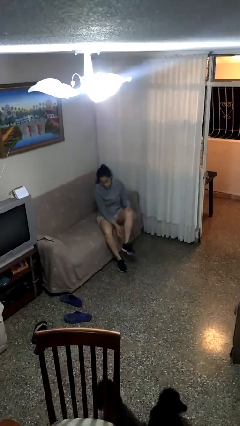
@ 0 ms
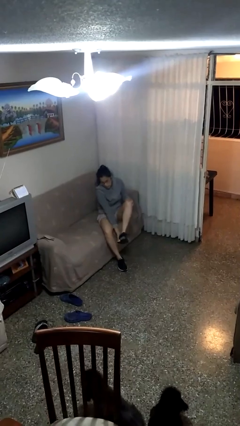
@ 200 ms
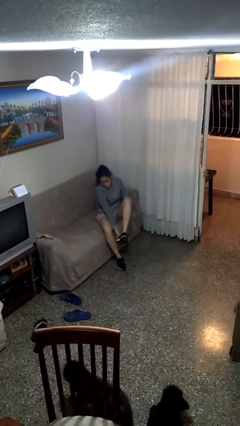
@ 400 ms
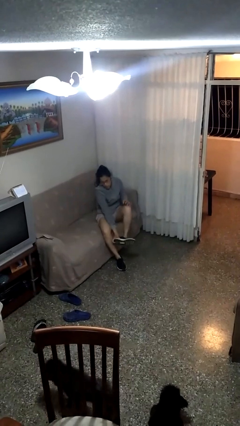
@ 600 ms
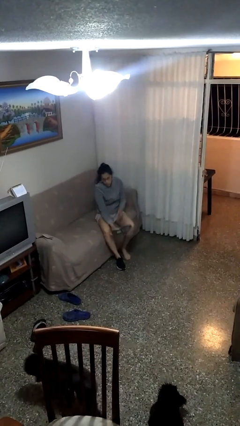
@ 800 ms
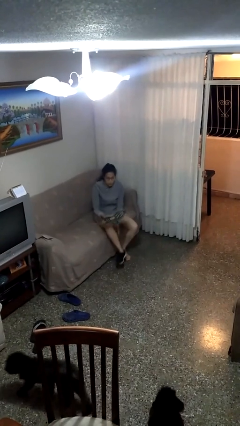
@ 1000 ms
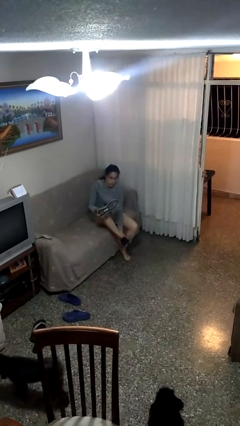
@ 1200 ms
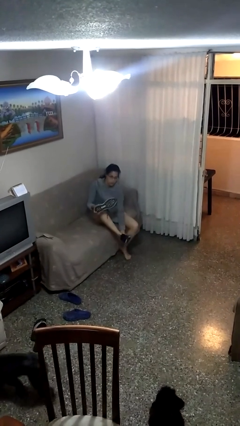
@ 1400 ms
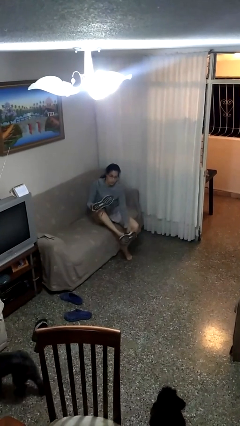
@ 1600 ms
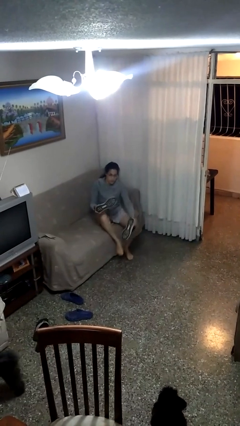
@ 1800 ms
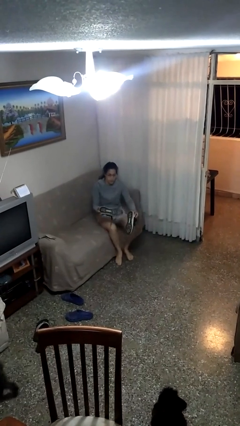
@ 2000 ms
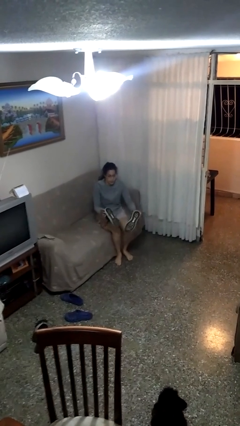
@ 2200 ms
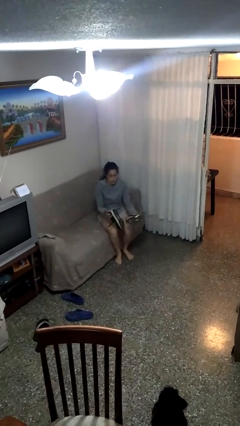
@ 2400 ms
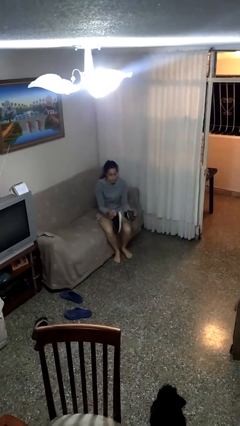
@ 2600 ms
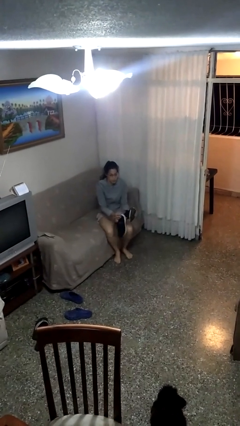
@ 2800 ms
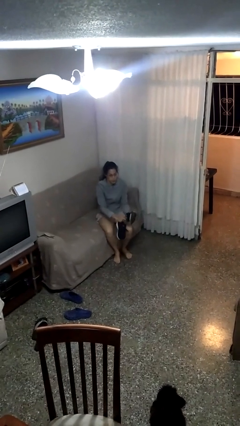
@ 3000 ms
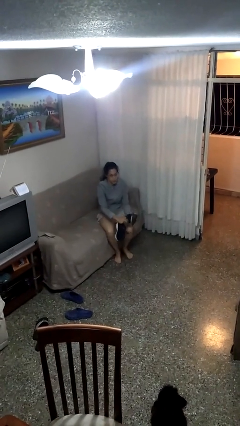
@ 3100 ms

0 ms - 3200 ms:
person takes off shoes

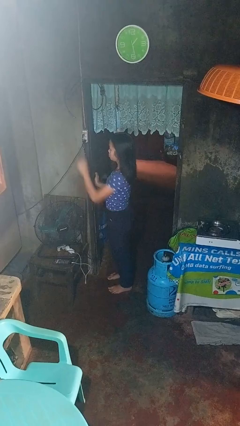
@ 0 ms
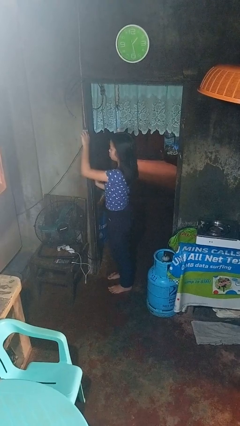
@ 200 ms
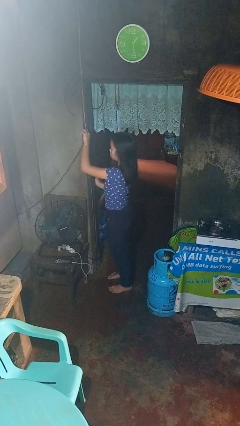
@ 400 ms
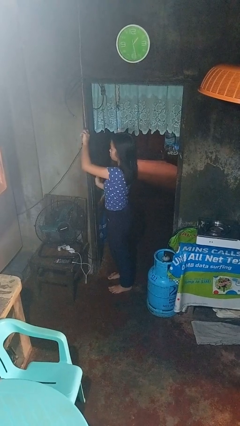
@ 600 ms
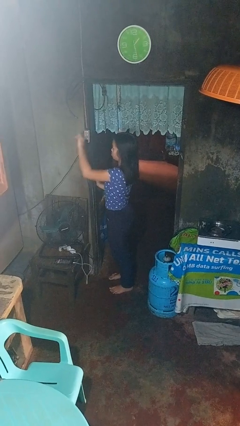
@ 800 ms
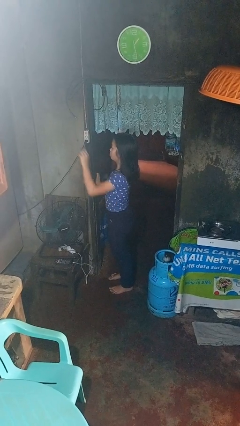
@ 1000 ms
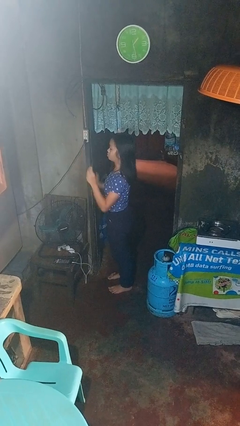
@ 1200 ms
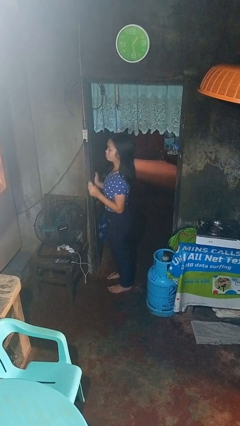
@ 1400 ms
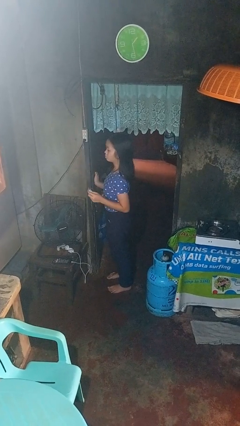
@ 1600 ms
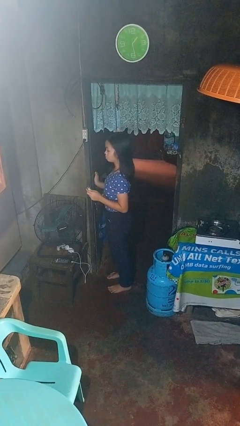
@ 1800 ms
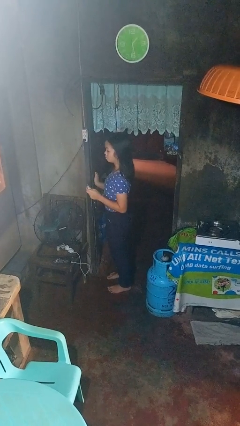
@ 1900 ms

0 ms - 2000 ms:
person unplugs from electrical socket

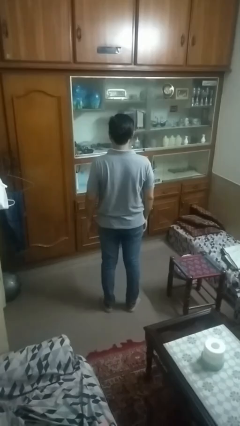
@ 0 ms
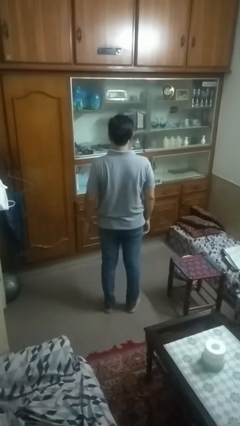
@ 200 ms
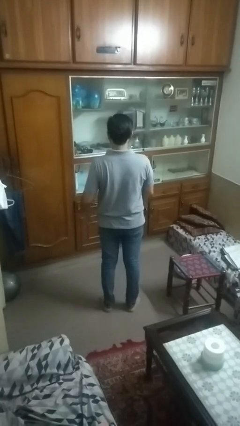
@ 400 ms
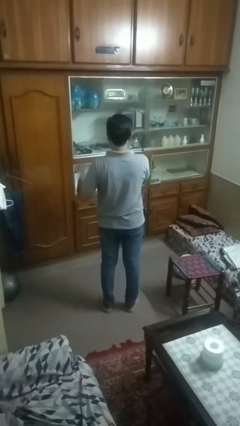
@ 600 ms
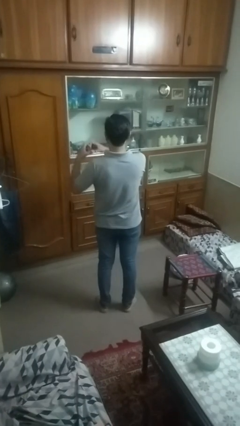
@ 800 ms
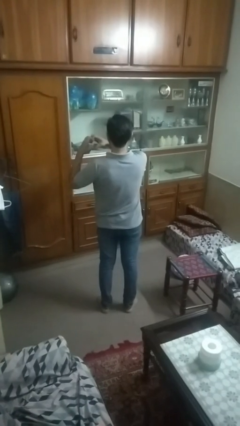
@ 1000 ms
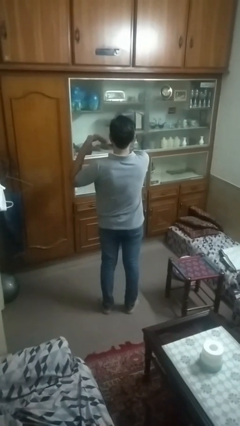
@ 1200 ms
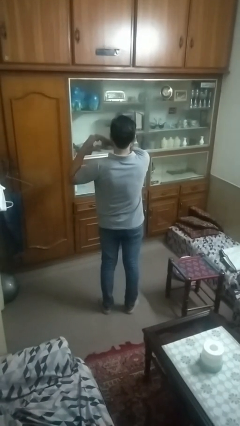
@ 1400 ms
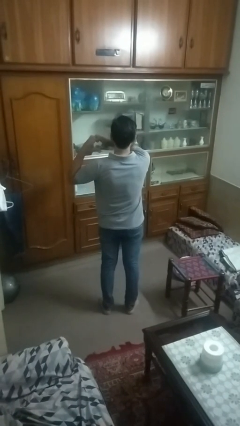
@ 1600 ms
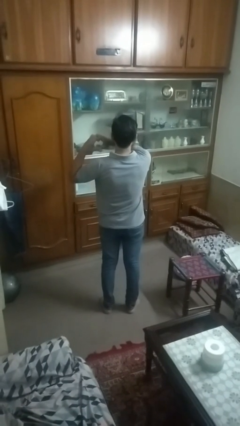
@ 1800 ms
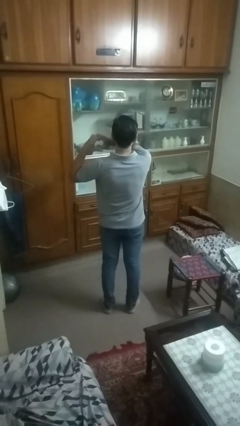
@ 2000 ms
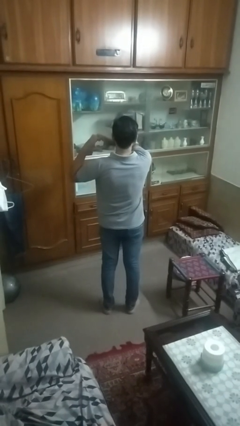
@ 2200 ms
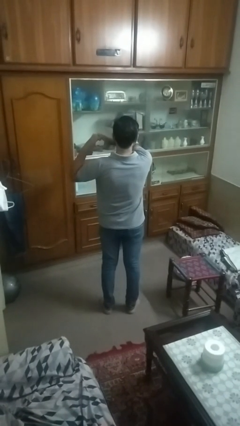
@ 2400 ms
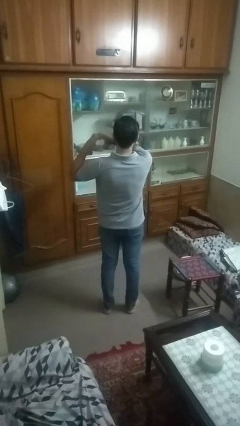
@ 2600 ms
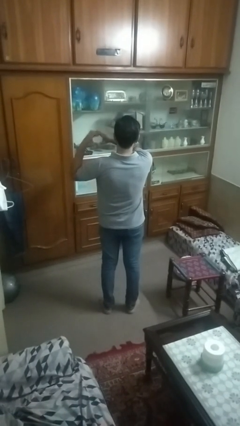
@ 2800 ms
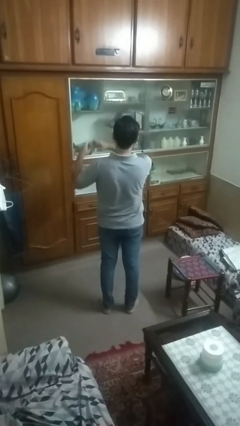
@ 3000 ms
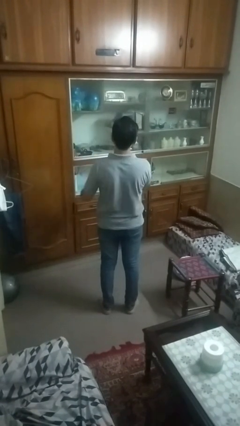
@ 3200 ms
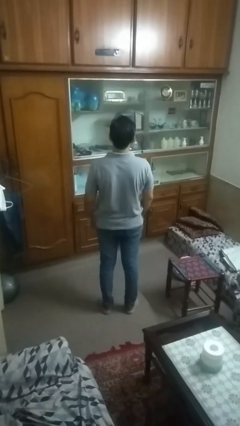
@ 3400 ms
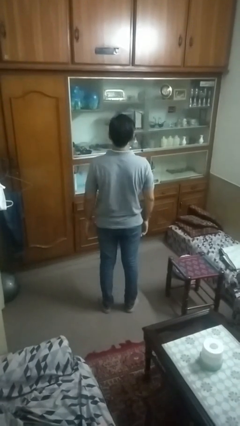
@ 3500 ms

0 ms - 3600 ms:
person gestures heart

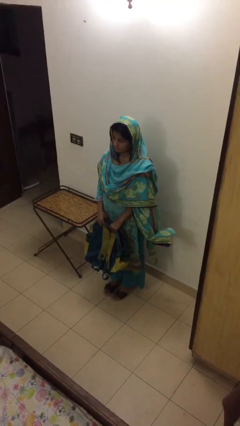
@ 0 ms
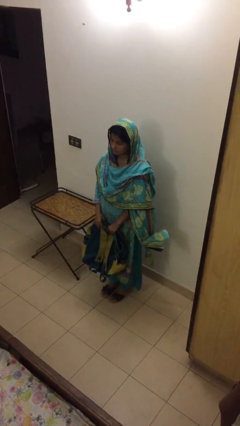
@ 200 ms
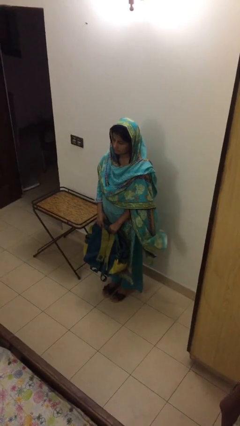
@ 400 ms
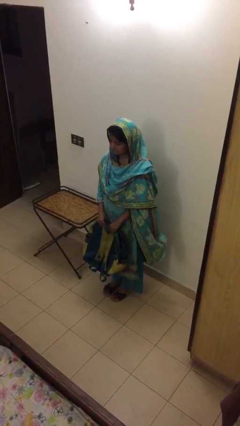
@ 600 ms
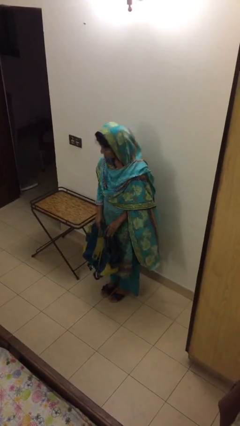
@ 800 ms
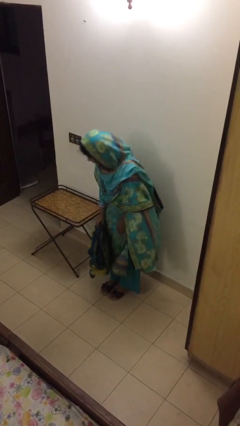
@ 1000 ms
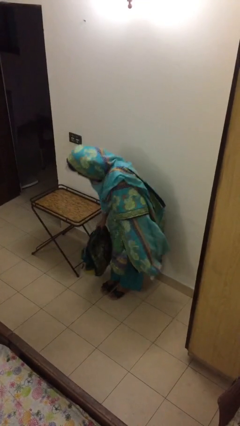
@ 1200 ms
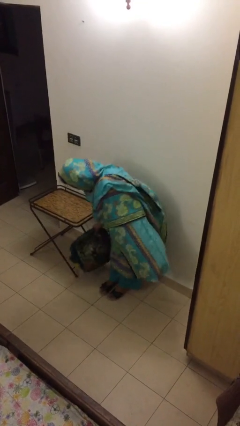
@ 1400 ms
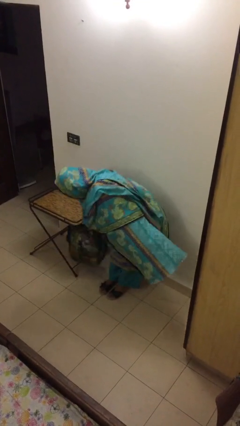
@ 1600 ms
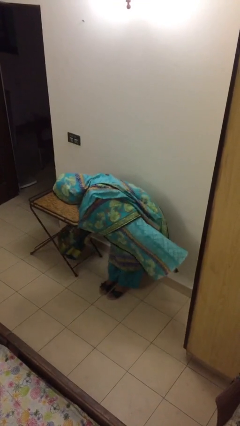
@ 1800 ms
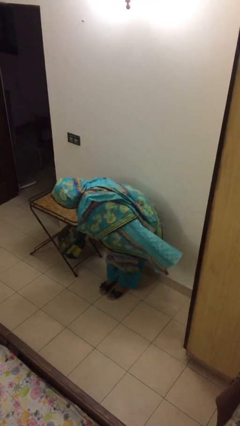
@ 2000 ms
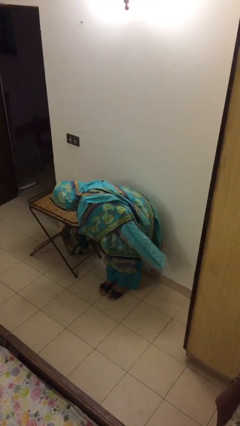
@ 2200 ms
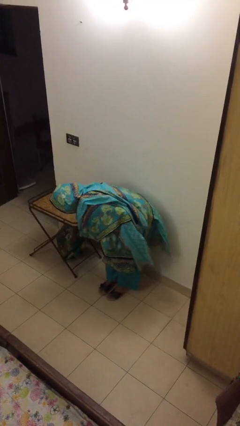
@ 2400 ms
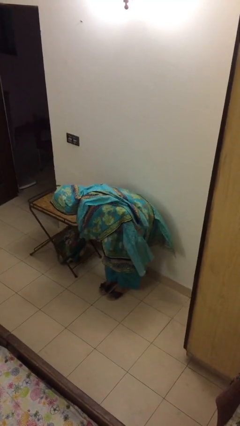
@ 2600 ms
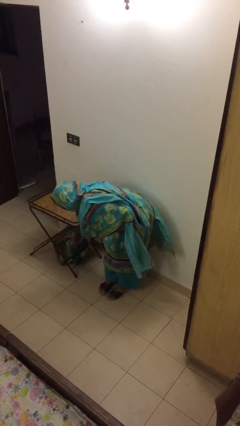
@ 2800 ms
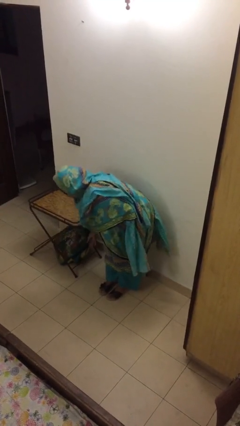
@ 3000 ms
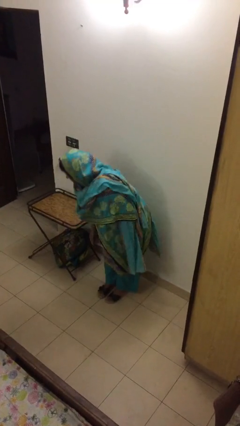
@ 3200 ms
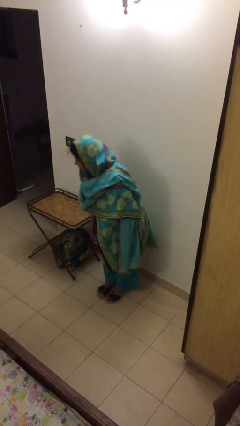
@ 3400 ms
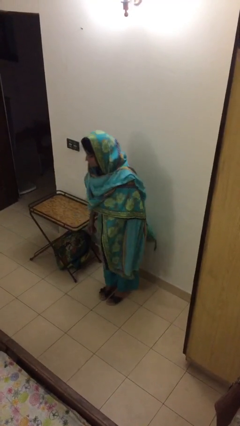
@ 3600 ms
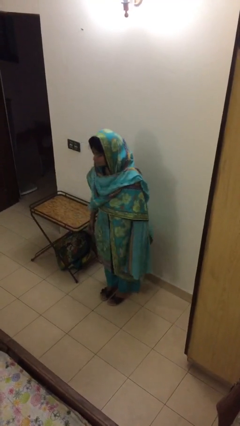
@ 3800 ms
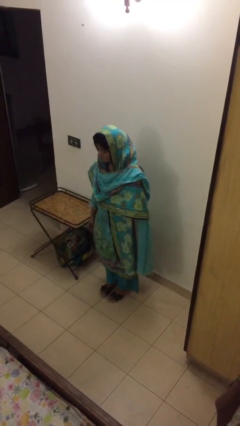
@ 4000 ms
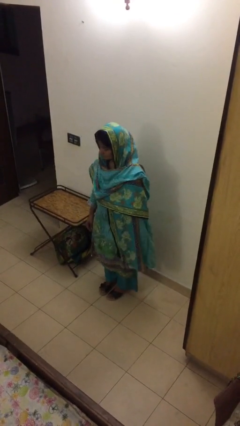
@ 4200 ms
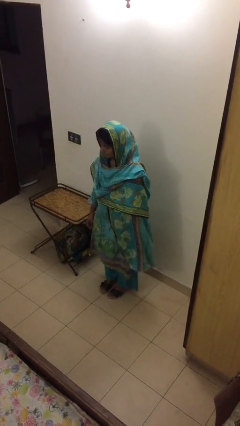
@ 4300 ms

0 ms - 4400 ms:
person puts down object on table

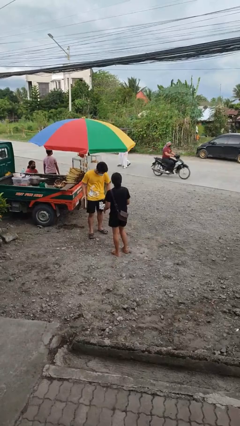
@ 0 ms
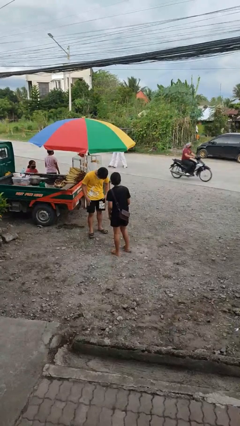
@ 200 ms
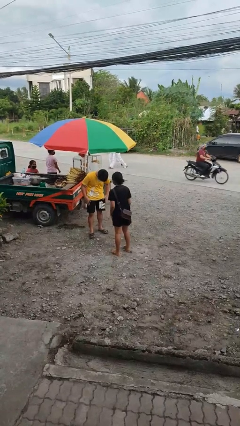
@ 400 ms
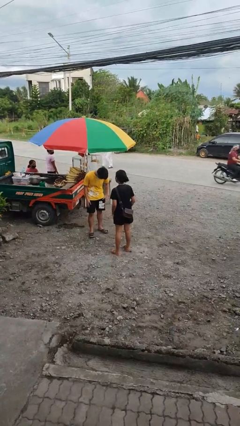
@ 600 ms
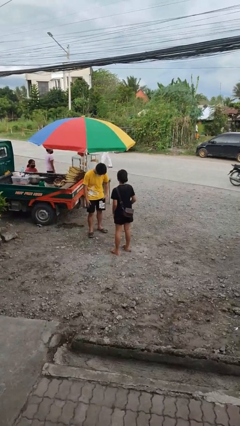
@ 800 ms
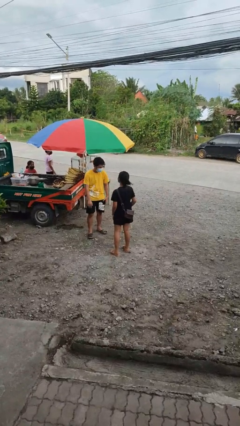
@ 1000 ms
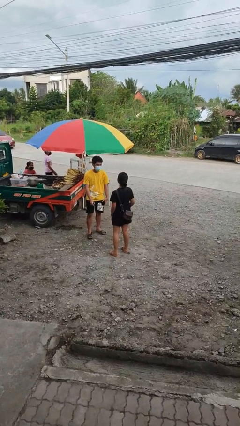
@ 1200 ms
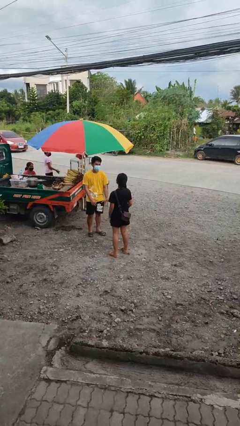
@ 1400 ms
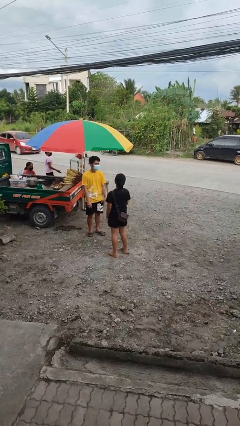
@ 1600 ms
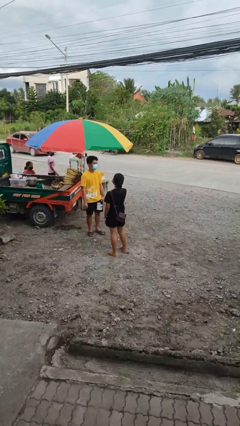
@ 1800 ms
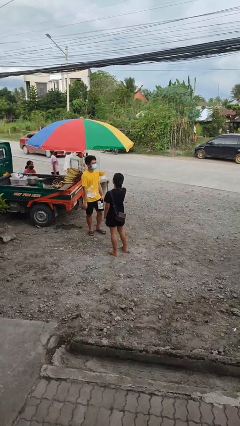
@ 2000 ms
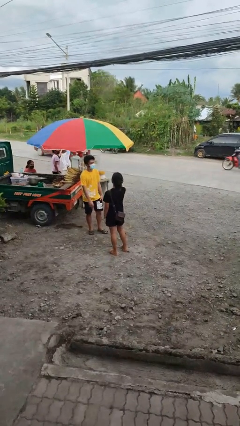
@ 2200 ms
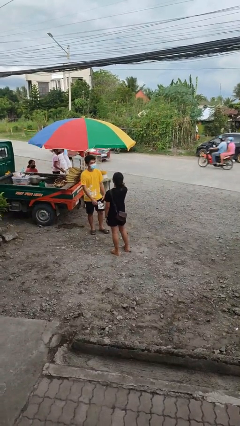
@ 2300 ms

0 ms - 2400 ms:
person laughs with person

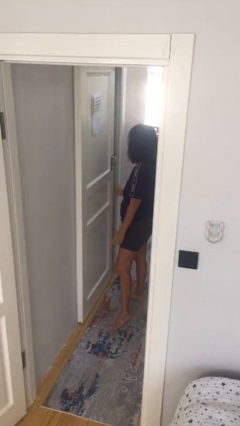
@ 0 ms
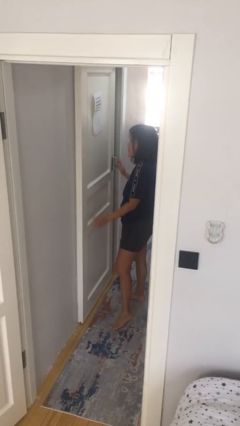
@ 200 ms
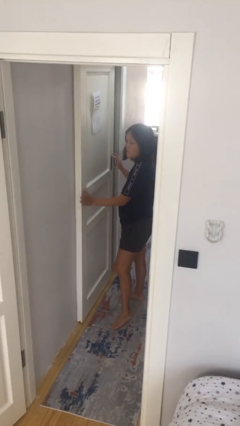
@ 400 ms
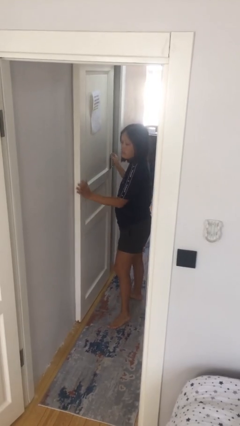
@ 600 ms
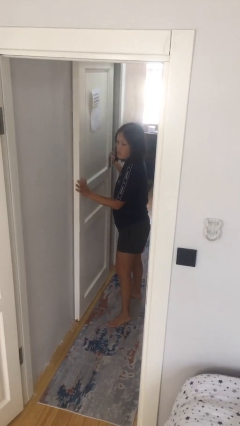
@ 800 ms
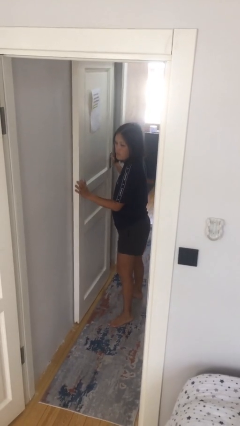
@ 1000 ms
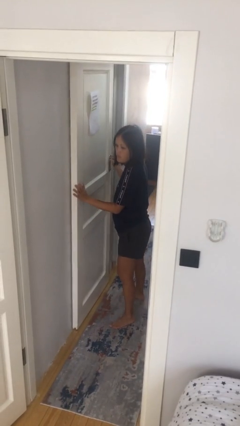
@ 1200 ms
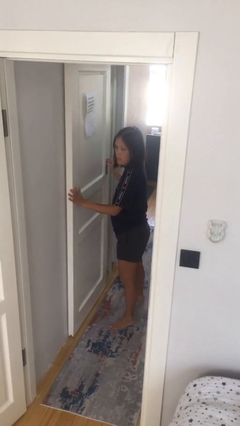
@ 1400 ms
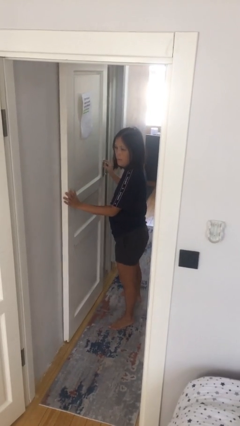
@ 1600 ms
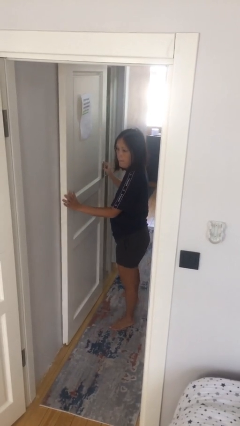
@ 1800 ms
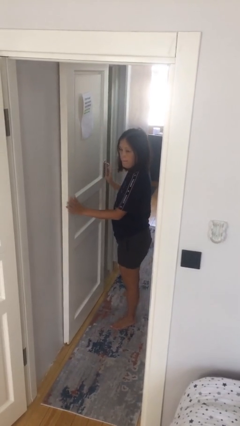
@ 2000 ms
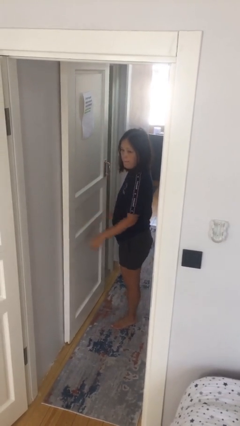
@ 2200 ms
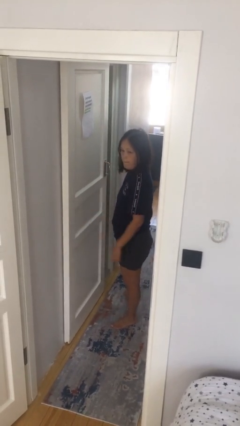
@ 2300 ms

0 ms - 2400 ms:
person opens sliding door
